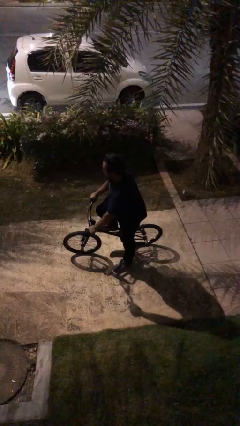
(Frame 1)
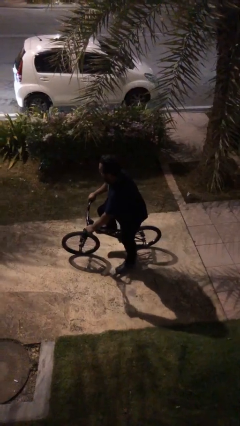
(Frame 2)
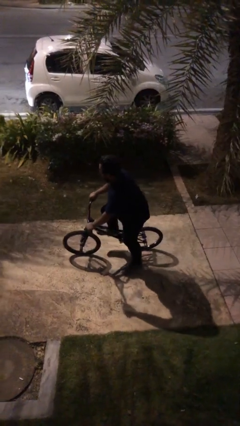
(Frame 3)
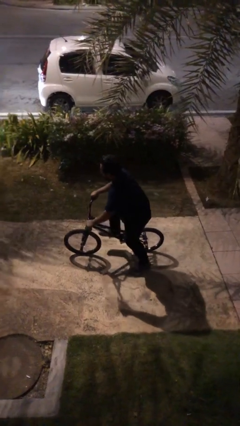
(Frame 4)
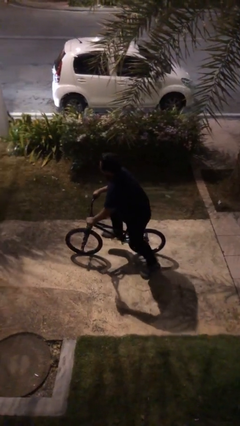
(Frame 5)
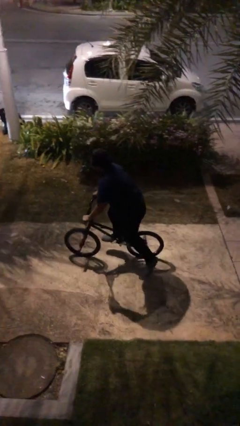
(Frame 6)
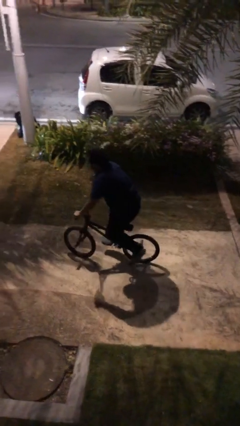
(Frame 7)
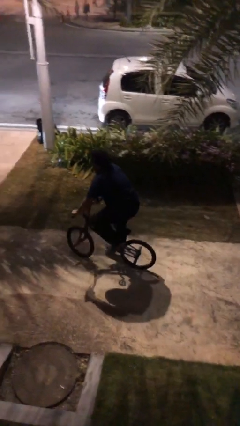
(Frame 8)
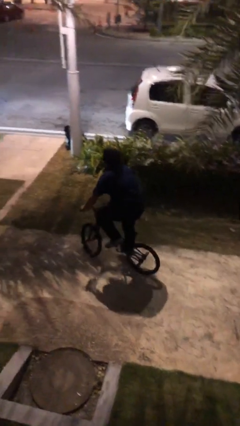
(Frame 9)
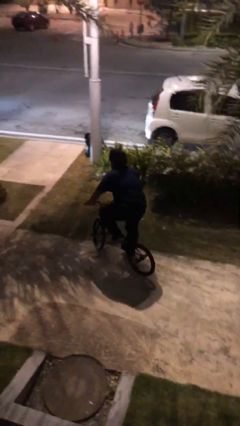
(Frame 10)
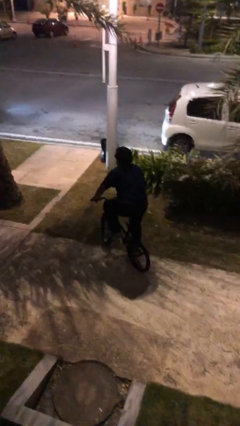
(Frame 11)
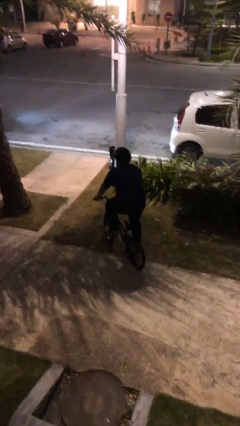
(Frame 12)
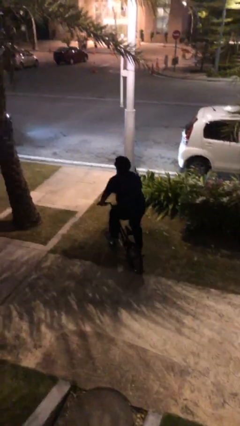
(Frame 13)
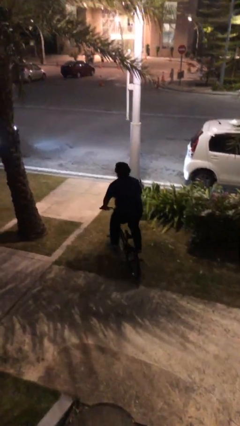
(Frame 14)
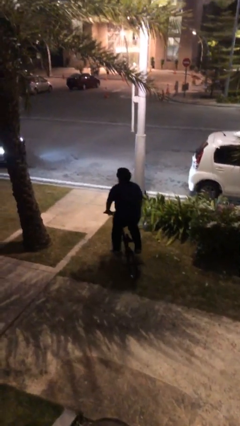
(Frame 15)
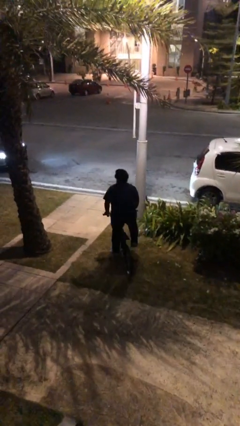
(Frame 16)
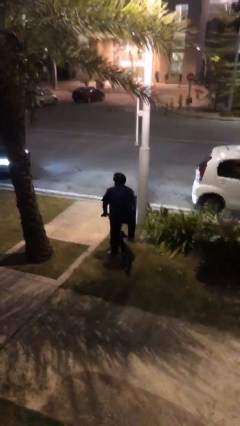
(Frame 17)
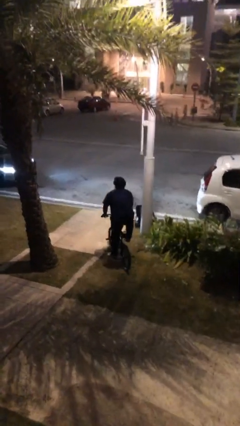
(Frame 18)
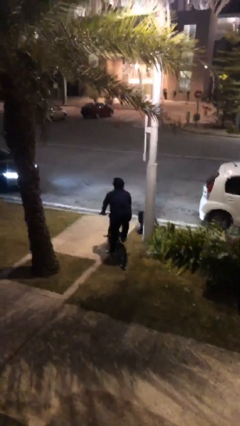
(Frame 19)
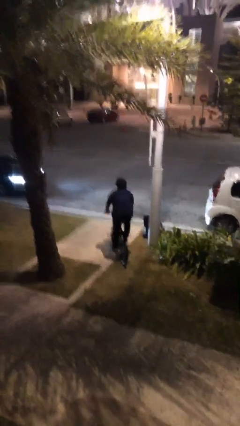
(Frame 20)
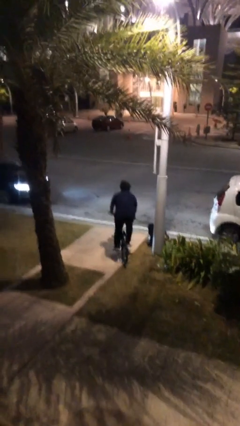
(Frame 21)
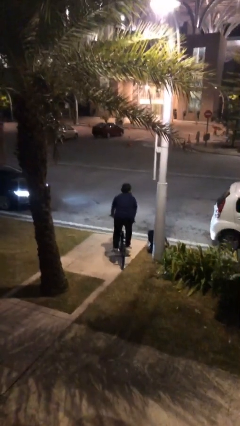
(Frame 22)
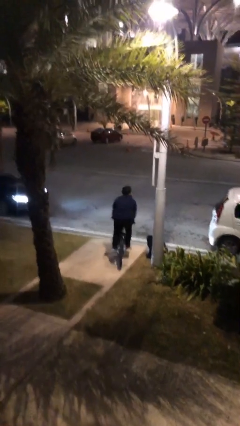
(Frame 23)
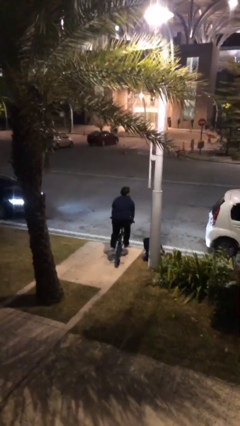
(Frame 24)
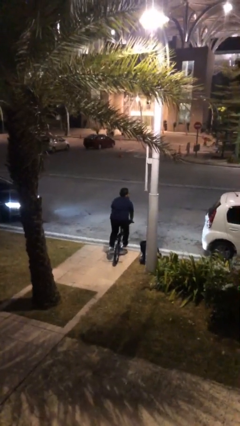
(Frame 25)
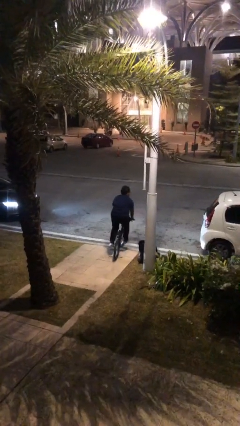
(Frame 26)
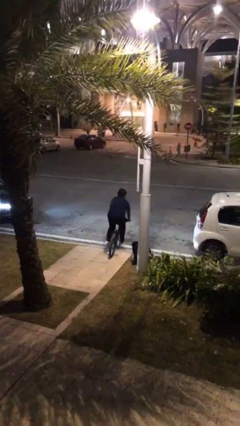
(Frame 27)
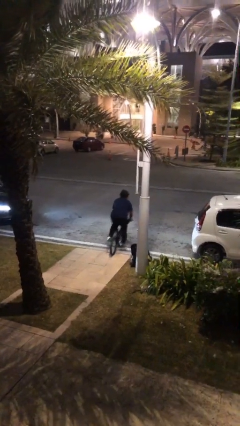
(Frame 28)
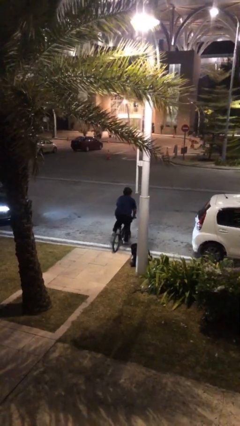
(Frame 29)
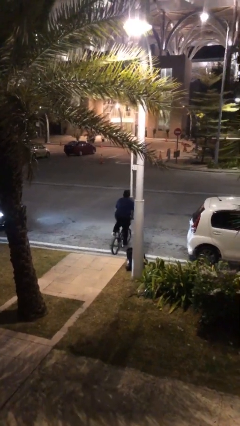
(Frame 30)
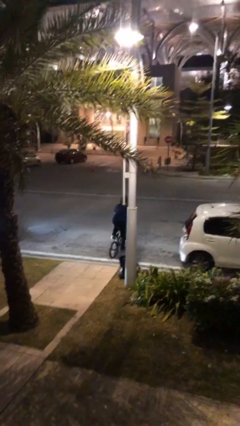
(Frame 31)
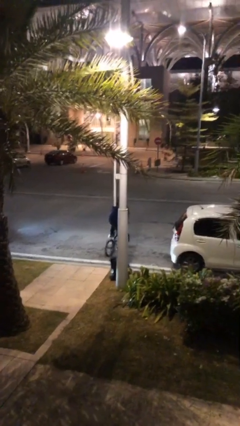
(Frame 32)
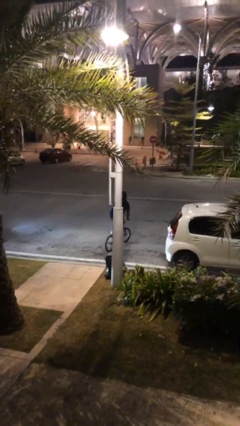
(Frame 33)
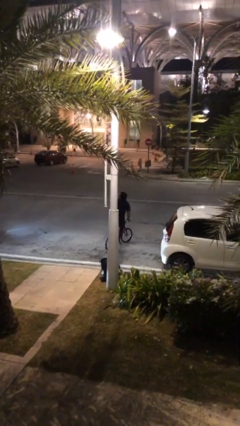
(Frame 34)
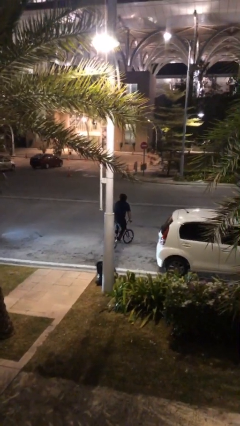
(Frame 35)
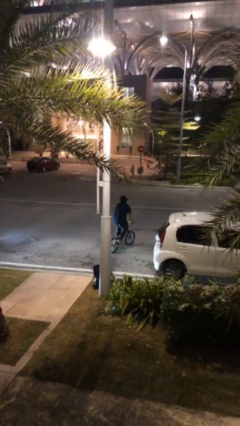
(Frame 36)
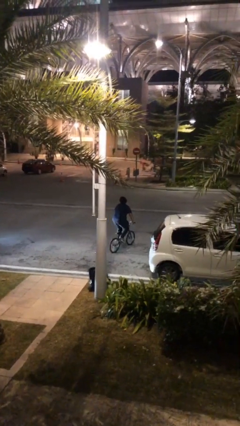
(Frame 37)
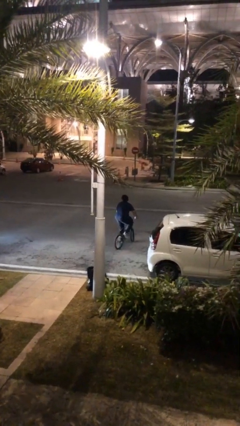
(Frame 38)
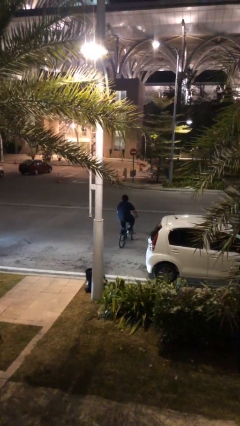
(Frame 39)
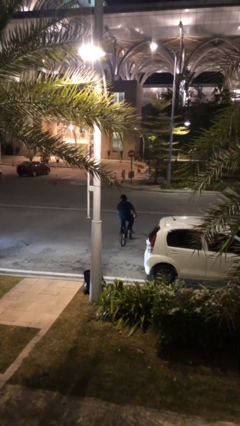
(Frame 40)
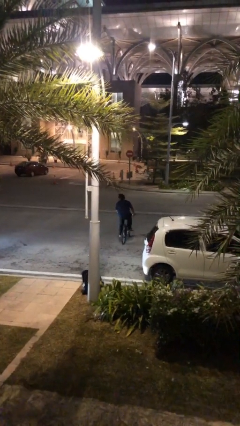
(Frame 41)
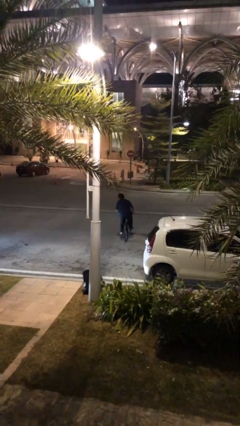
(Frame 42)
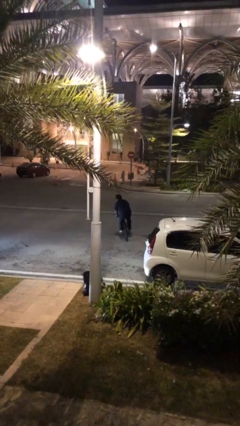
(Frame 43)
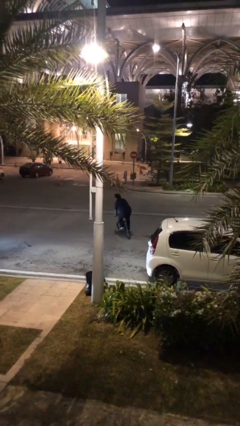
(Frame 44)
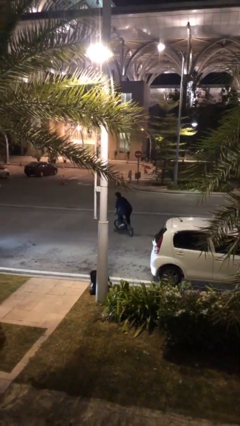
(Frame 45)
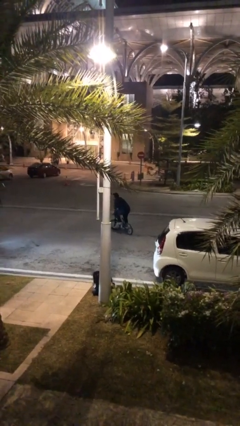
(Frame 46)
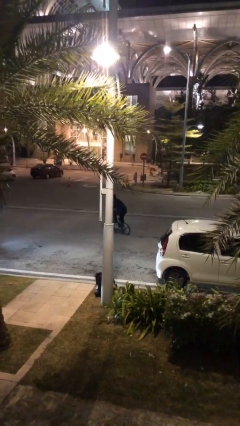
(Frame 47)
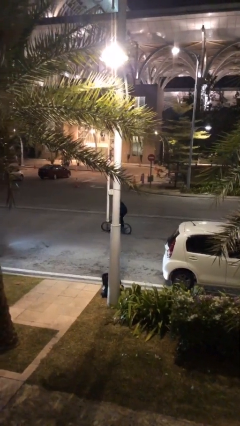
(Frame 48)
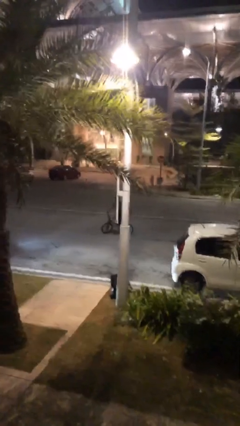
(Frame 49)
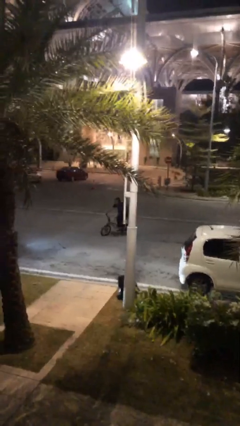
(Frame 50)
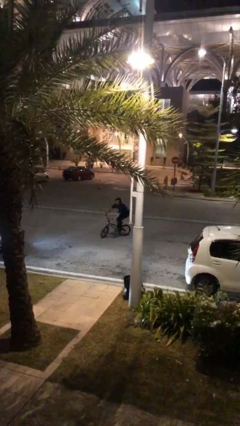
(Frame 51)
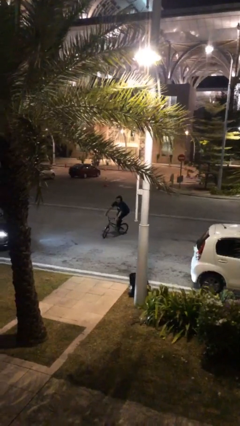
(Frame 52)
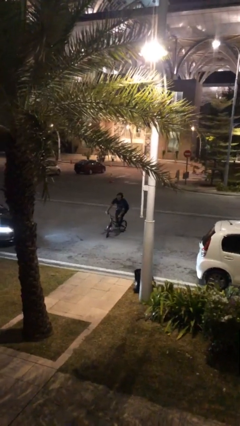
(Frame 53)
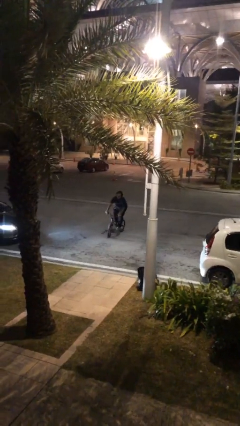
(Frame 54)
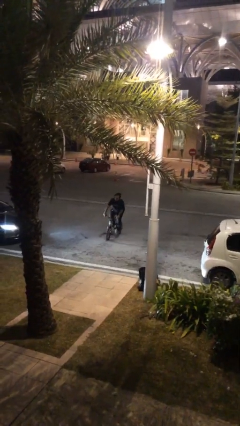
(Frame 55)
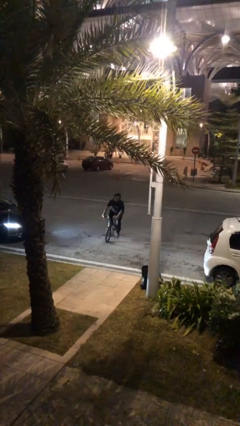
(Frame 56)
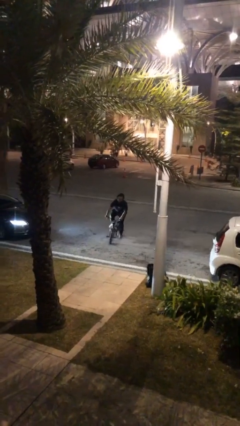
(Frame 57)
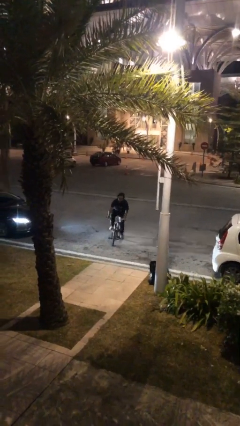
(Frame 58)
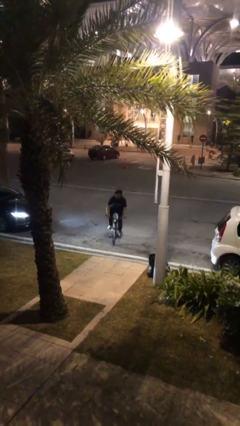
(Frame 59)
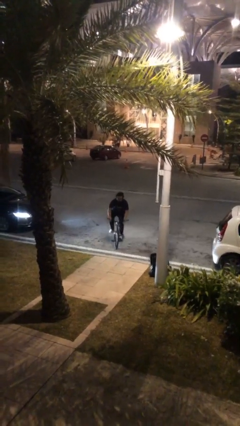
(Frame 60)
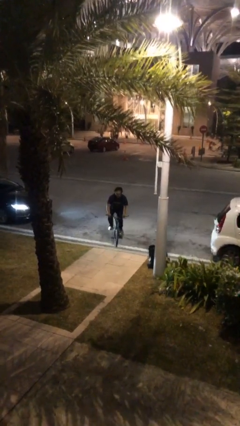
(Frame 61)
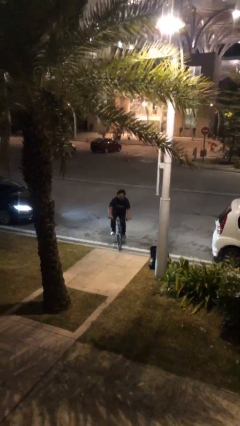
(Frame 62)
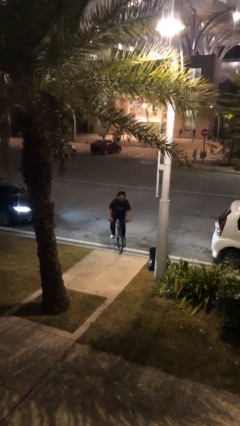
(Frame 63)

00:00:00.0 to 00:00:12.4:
person rides bicycle

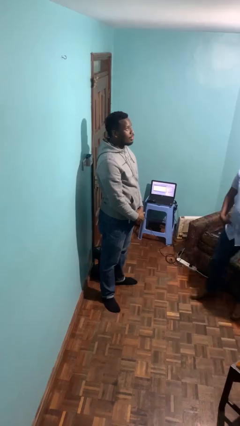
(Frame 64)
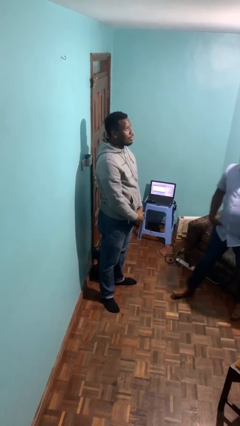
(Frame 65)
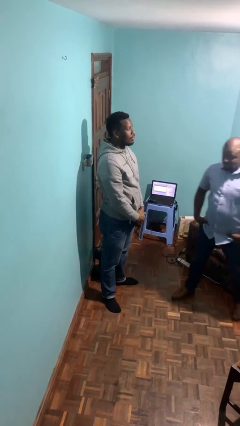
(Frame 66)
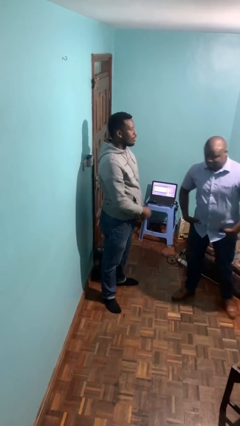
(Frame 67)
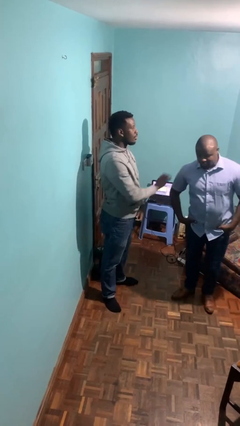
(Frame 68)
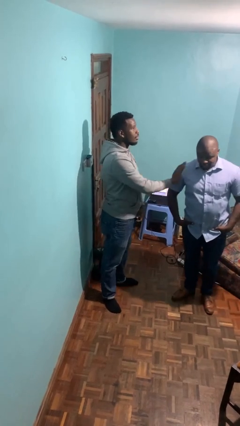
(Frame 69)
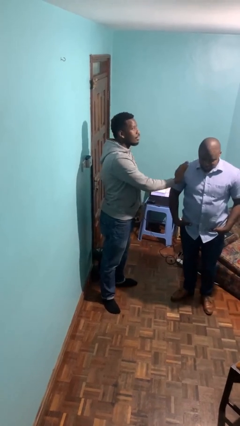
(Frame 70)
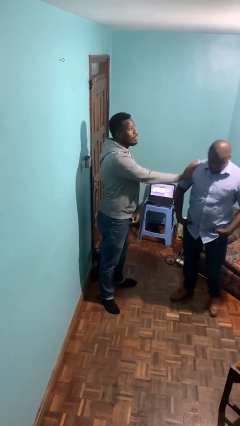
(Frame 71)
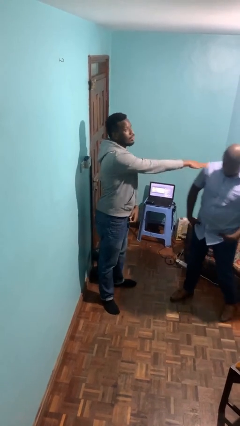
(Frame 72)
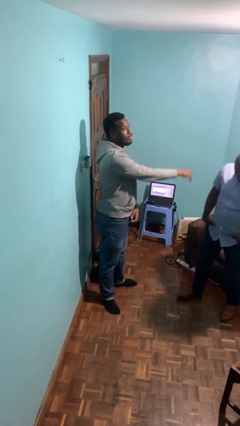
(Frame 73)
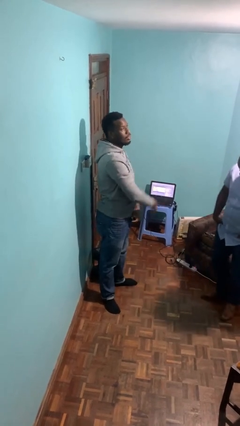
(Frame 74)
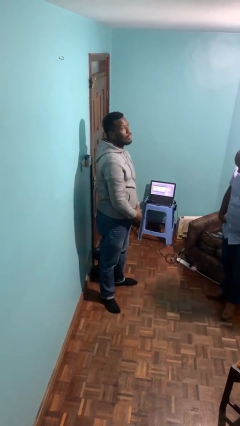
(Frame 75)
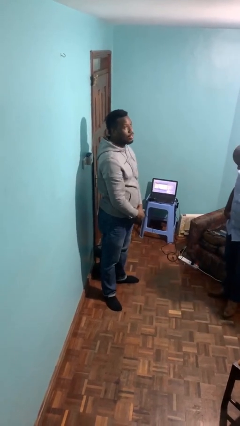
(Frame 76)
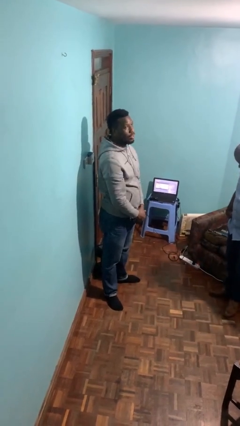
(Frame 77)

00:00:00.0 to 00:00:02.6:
person shoves person

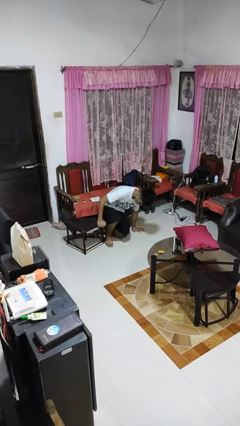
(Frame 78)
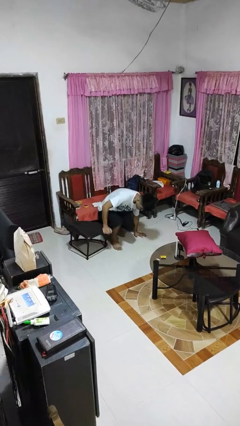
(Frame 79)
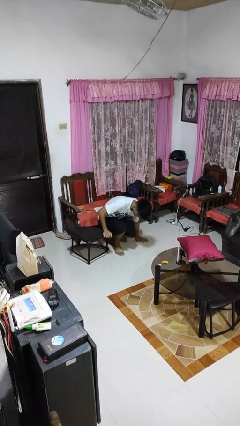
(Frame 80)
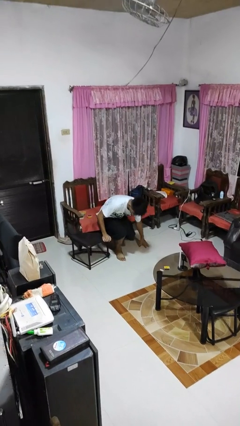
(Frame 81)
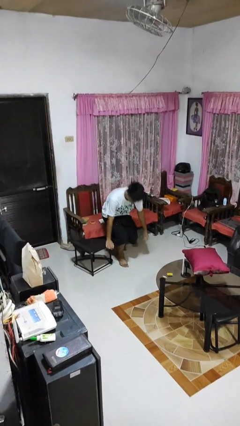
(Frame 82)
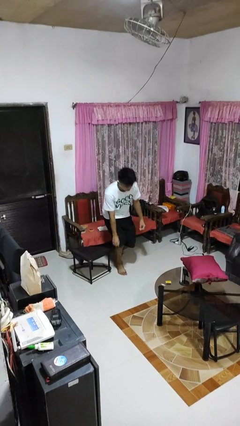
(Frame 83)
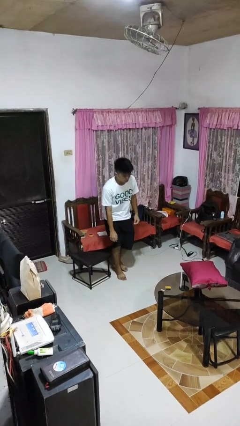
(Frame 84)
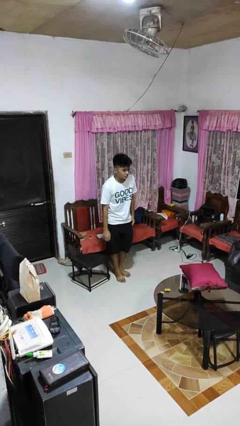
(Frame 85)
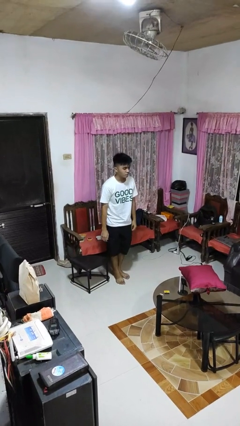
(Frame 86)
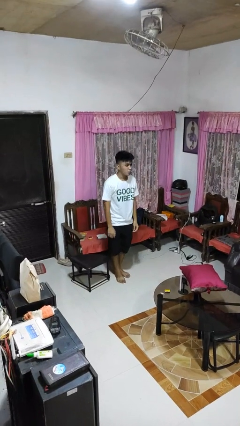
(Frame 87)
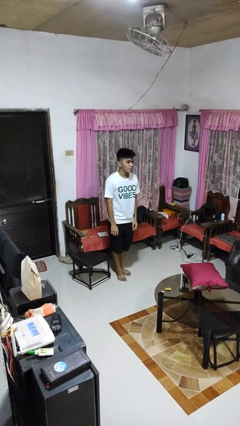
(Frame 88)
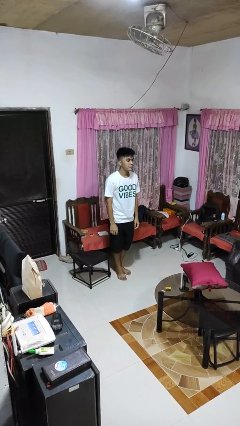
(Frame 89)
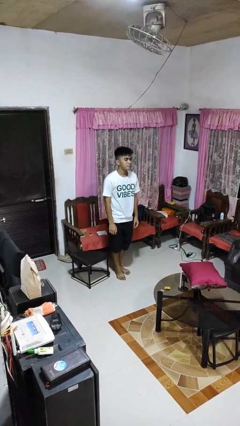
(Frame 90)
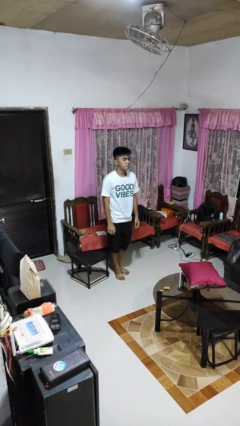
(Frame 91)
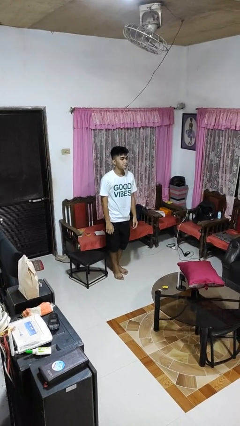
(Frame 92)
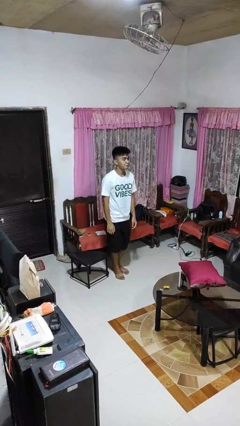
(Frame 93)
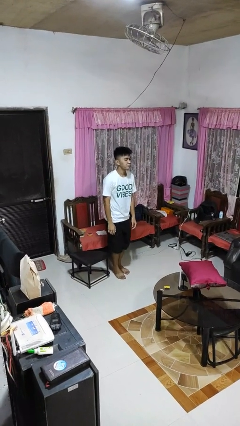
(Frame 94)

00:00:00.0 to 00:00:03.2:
person stands up from floor
